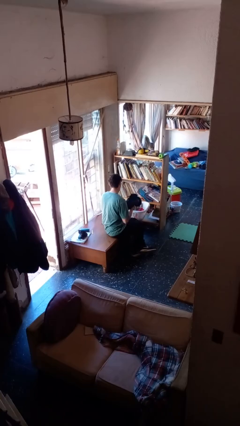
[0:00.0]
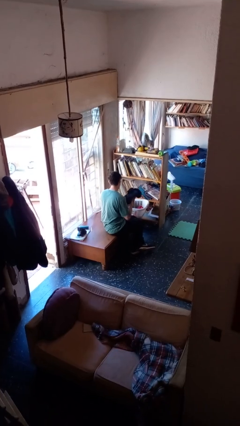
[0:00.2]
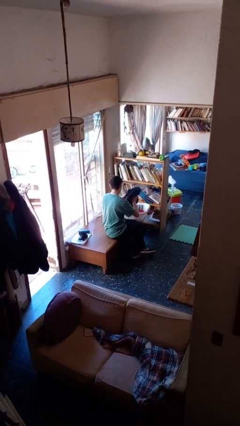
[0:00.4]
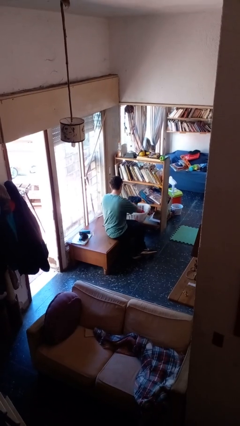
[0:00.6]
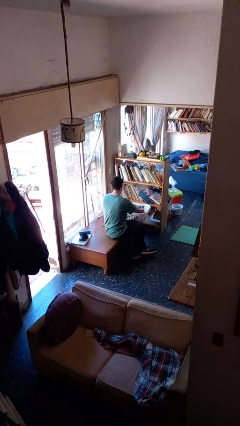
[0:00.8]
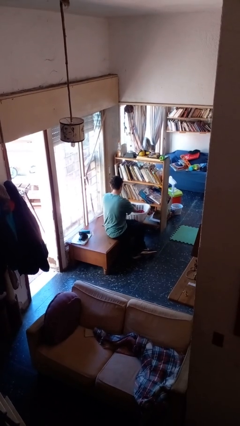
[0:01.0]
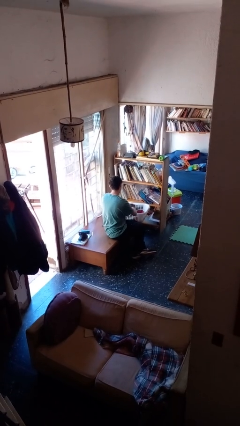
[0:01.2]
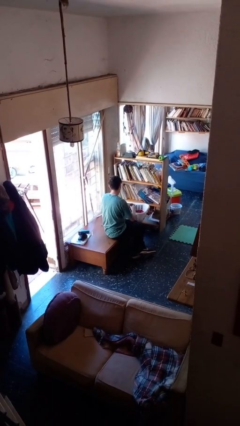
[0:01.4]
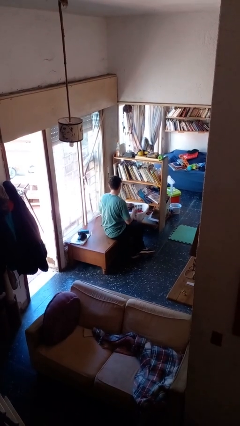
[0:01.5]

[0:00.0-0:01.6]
person puts object into basket

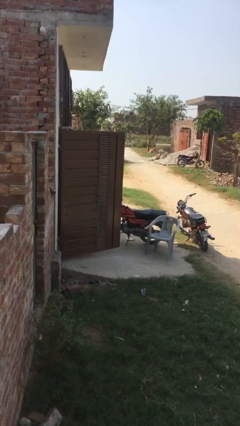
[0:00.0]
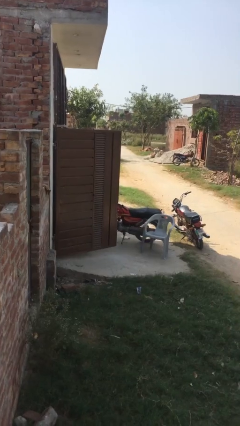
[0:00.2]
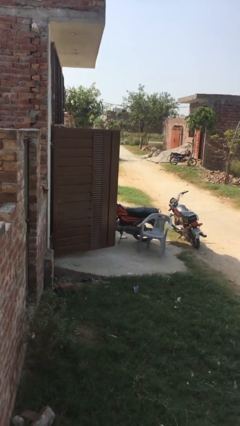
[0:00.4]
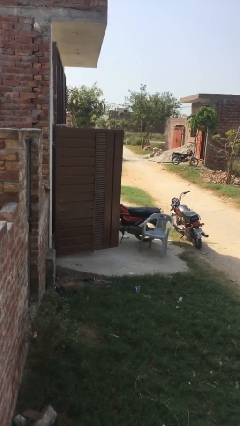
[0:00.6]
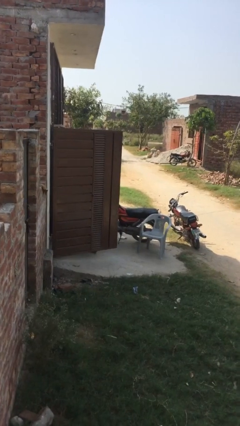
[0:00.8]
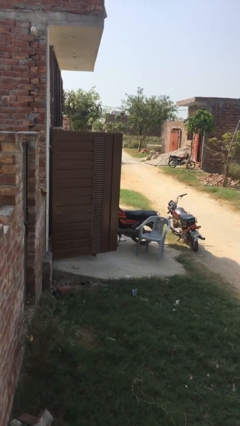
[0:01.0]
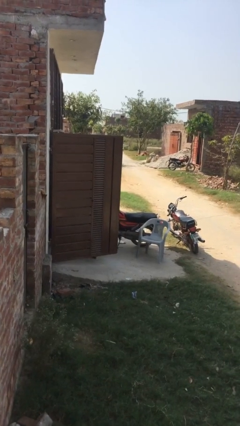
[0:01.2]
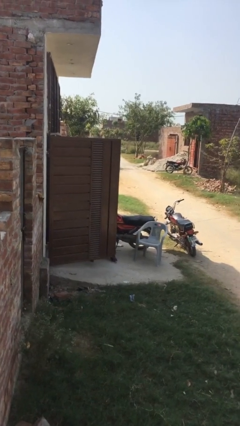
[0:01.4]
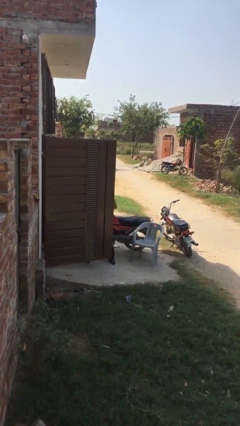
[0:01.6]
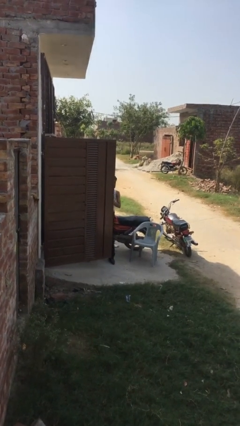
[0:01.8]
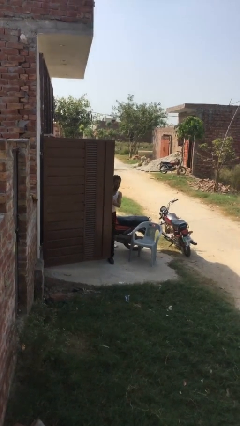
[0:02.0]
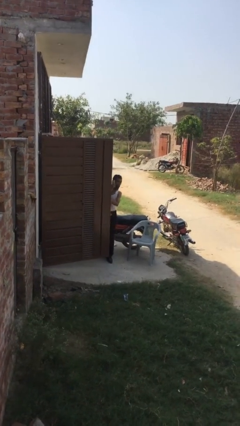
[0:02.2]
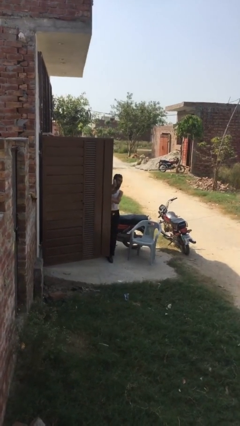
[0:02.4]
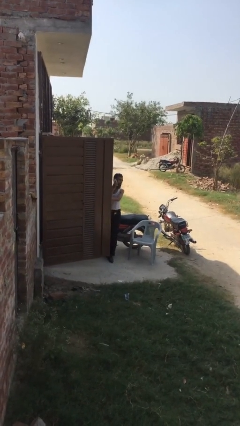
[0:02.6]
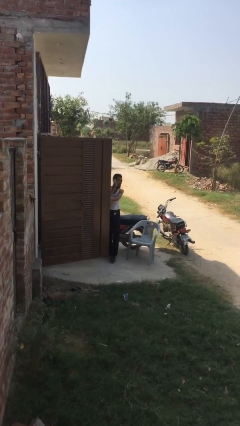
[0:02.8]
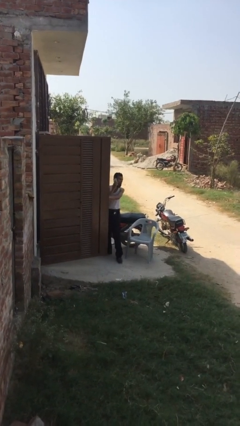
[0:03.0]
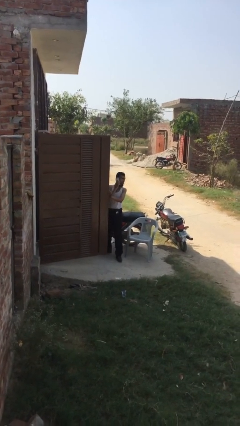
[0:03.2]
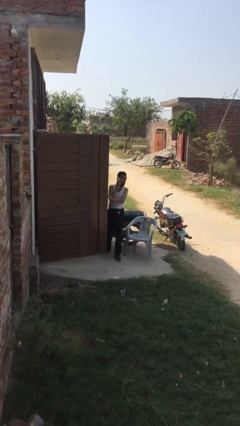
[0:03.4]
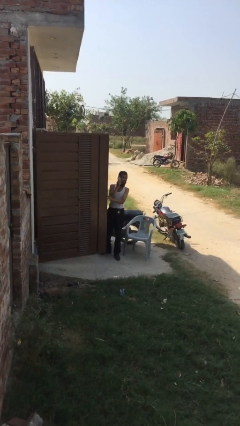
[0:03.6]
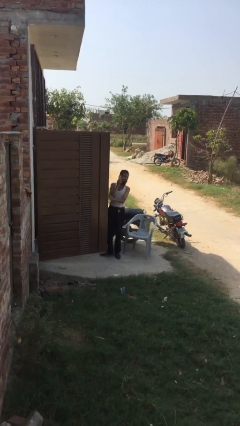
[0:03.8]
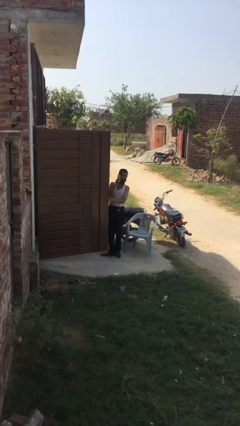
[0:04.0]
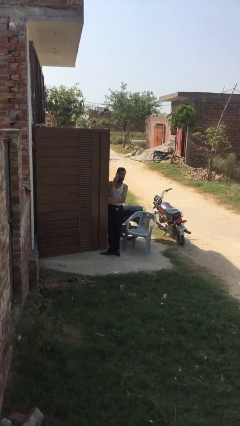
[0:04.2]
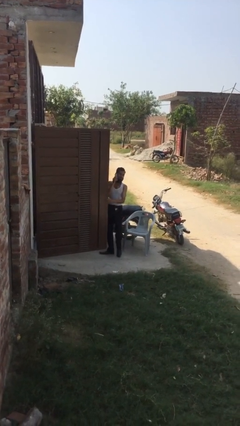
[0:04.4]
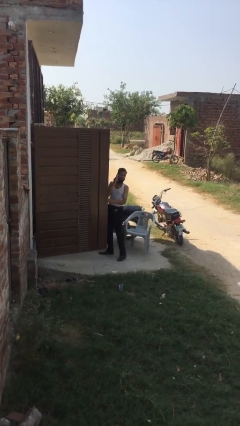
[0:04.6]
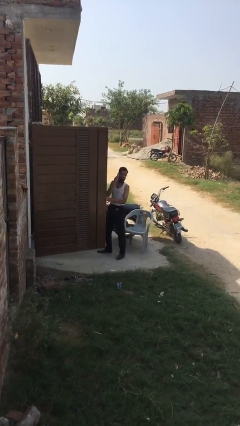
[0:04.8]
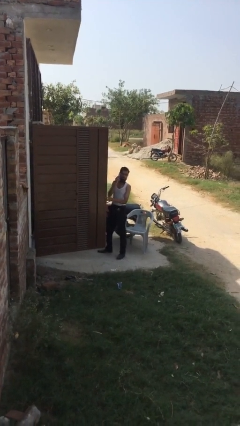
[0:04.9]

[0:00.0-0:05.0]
person enters scene through structure

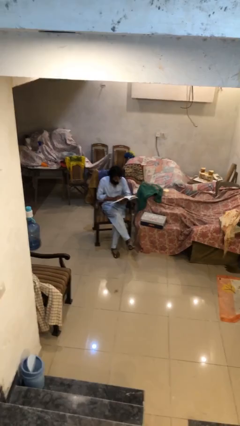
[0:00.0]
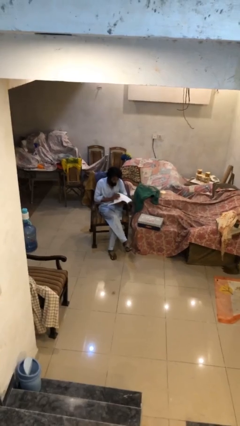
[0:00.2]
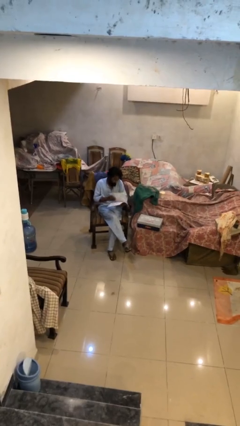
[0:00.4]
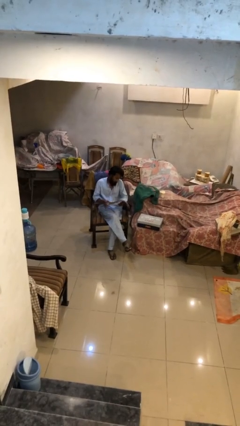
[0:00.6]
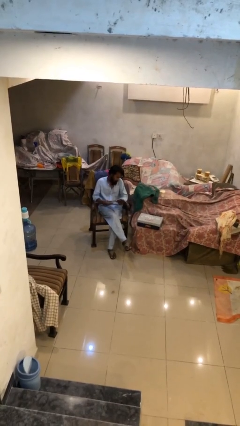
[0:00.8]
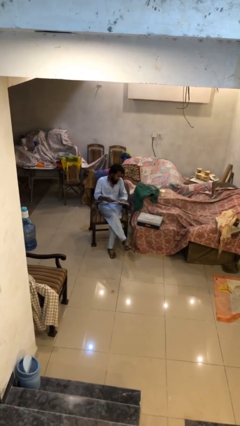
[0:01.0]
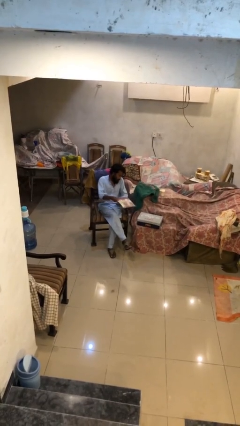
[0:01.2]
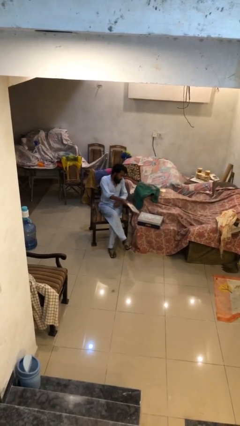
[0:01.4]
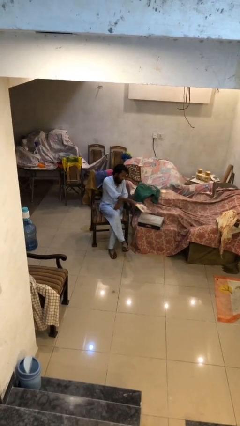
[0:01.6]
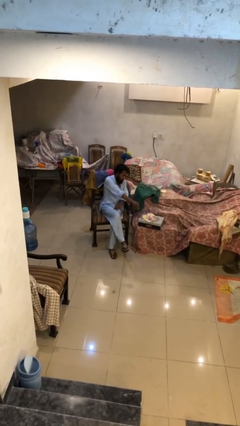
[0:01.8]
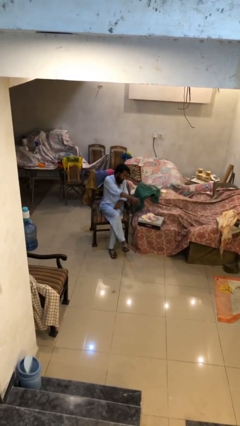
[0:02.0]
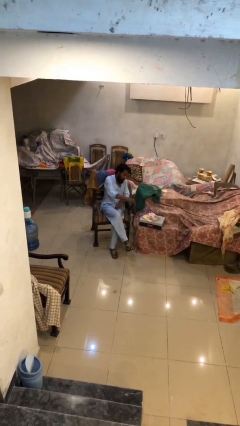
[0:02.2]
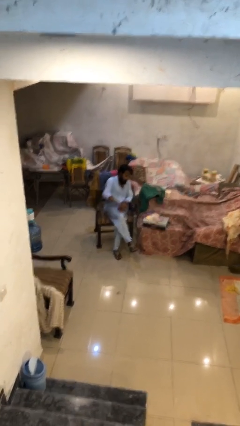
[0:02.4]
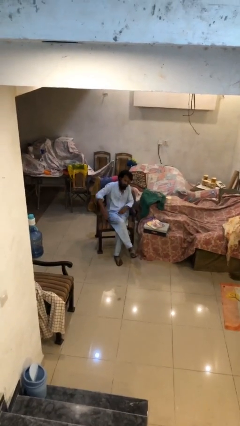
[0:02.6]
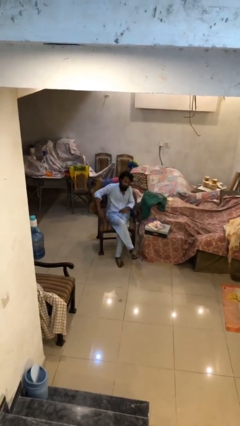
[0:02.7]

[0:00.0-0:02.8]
person puts down object on table

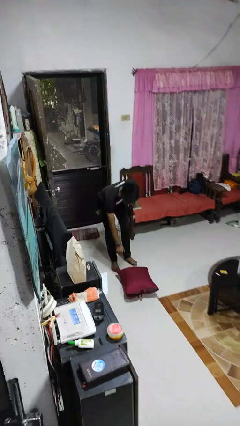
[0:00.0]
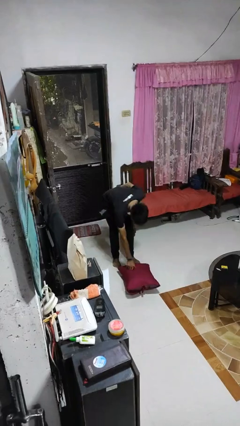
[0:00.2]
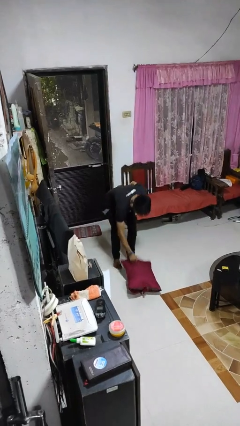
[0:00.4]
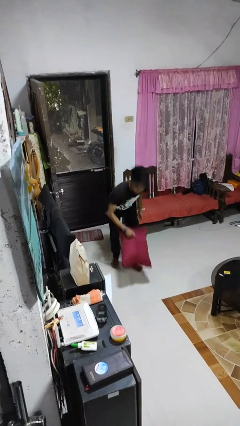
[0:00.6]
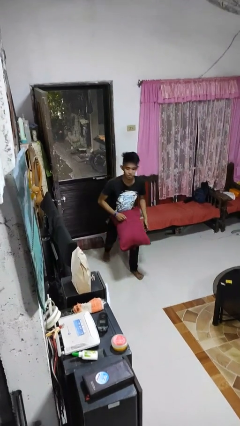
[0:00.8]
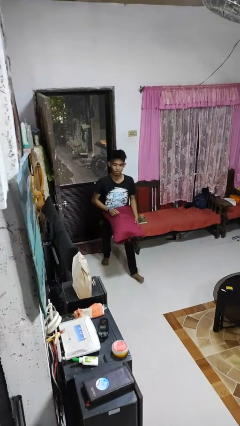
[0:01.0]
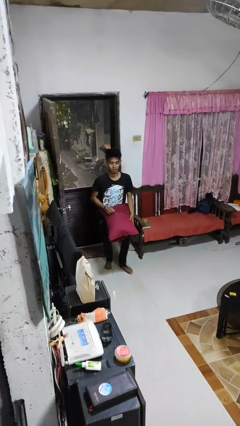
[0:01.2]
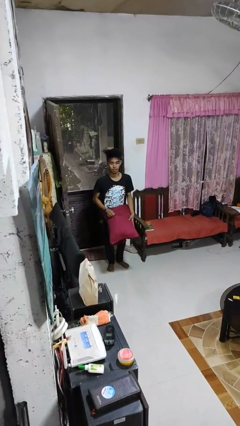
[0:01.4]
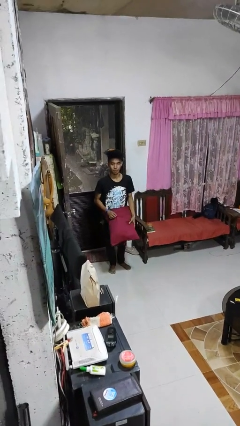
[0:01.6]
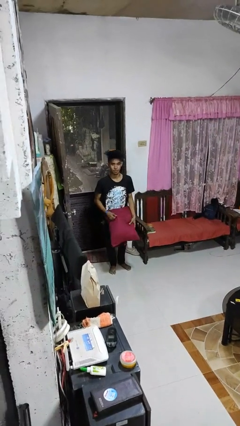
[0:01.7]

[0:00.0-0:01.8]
person picks up object from floor

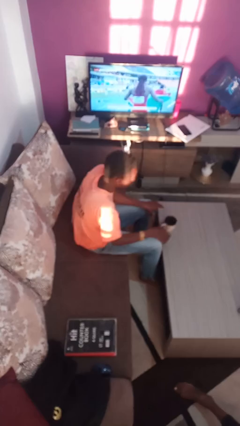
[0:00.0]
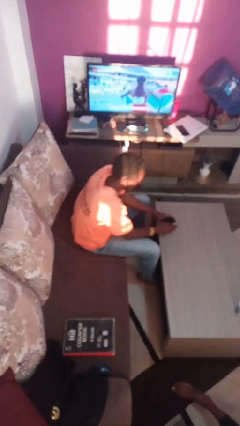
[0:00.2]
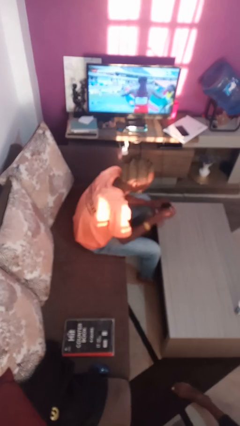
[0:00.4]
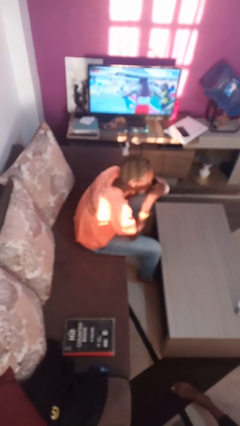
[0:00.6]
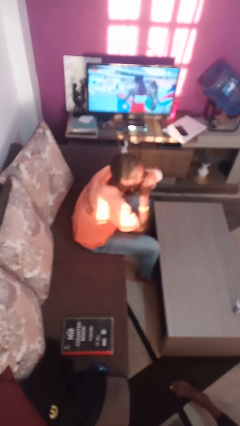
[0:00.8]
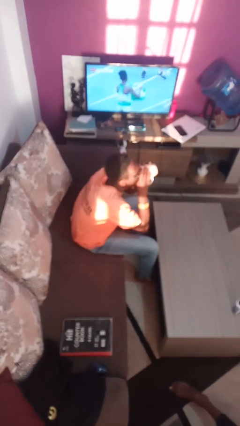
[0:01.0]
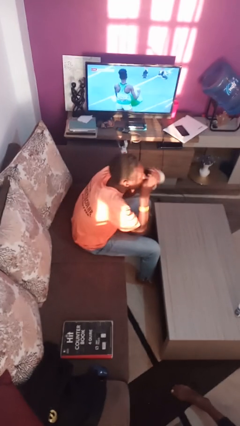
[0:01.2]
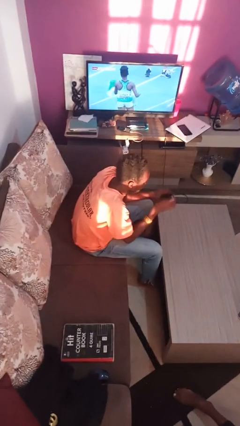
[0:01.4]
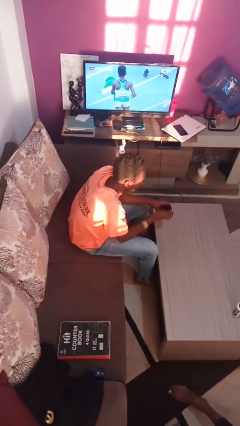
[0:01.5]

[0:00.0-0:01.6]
person drinks from mug

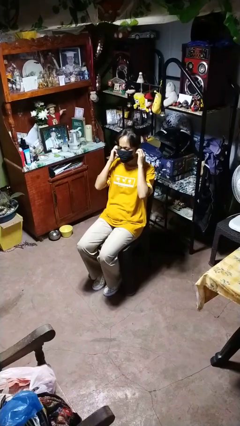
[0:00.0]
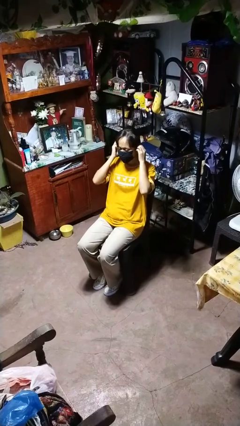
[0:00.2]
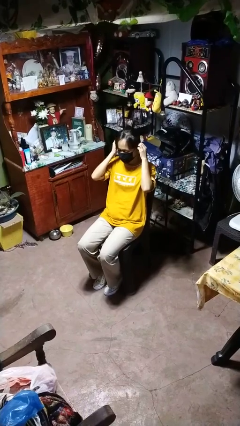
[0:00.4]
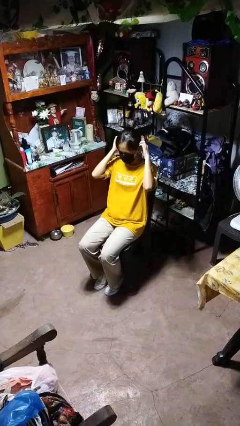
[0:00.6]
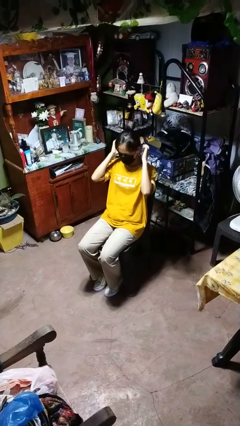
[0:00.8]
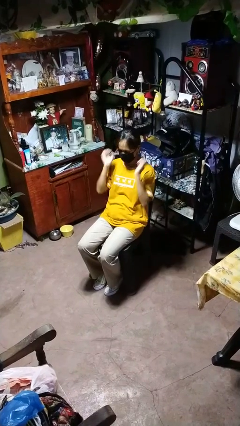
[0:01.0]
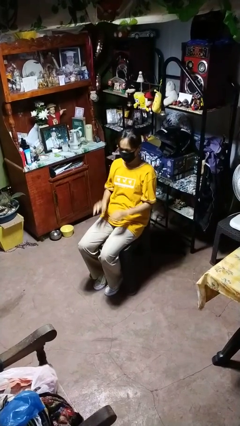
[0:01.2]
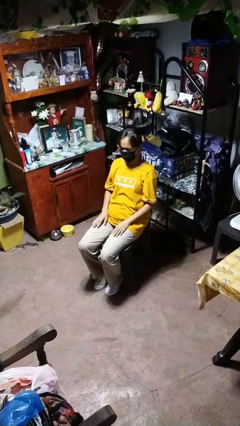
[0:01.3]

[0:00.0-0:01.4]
person puts on facemask

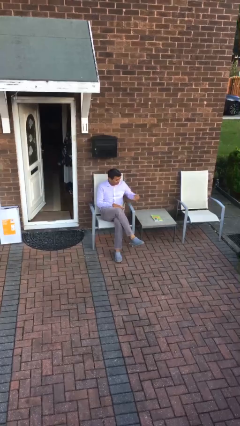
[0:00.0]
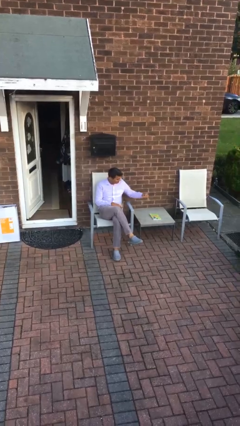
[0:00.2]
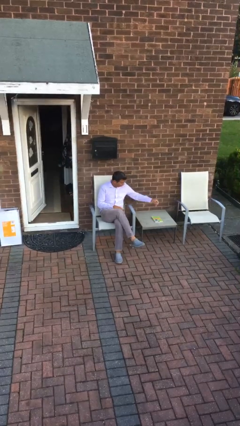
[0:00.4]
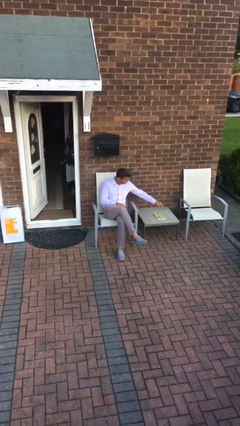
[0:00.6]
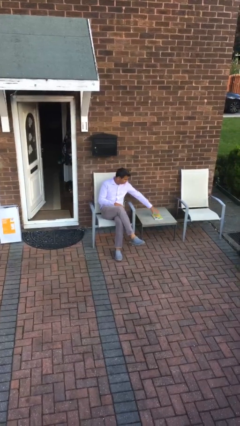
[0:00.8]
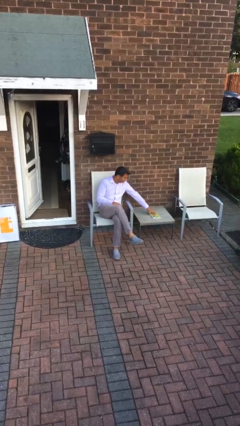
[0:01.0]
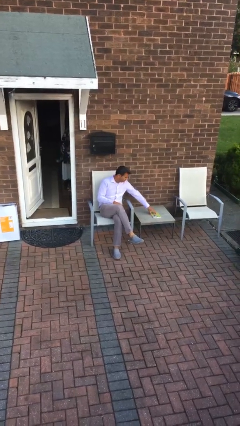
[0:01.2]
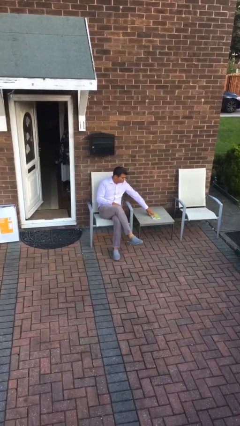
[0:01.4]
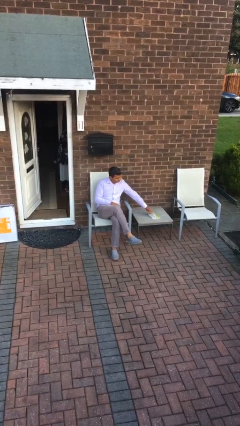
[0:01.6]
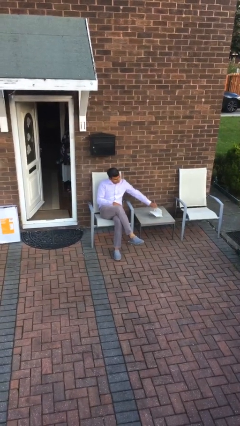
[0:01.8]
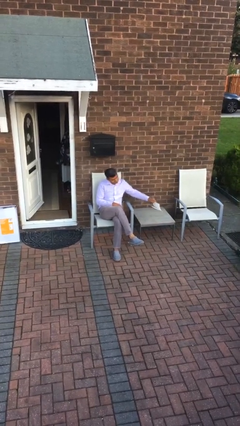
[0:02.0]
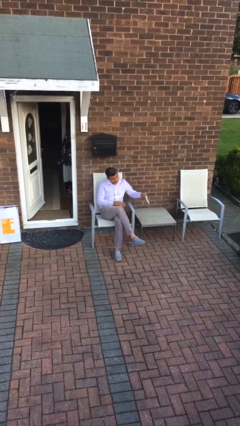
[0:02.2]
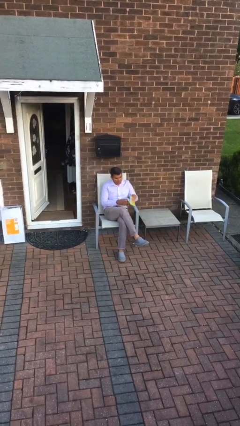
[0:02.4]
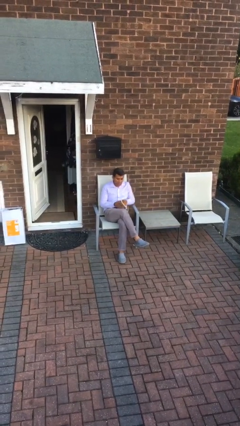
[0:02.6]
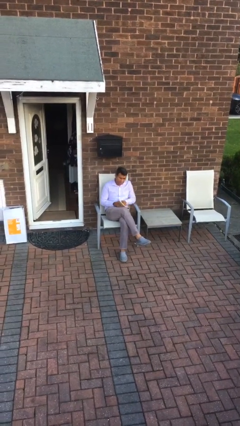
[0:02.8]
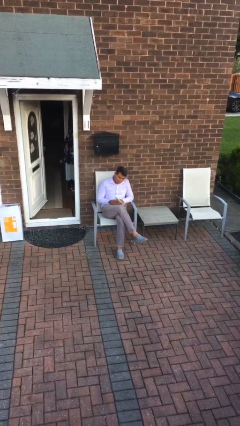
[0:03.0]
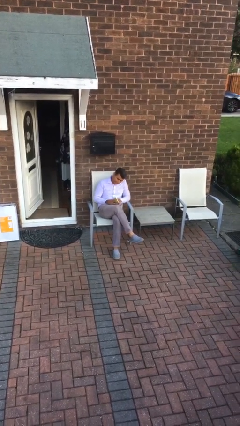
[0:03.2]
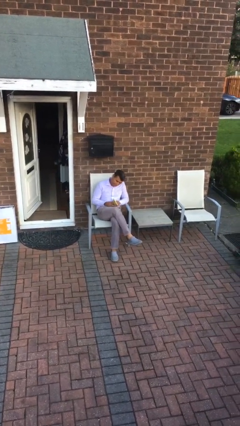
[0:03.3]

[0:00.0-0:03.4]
person picks up object from table
